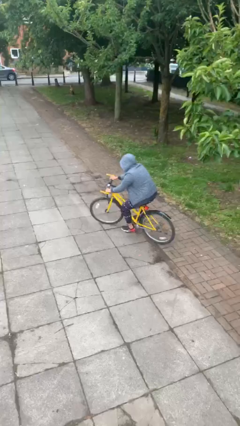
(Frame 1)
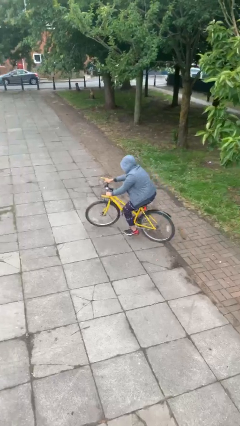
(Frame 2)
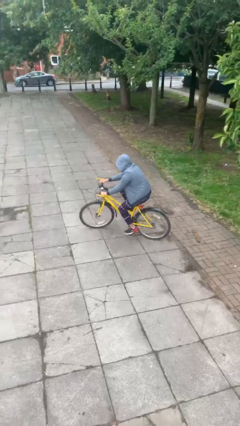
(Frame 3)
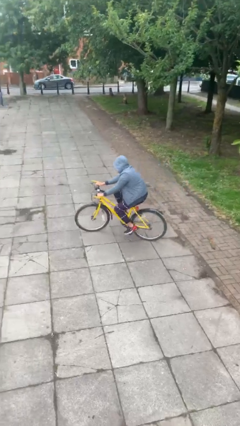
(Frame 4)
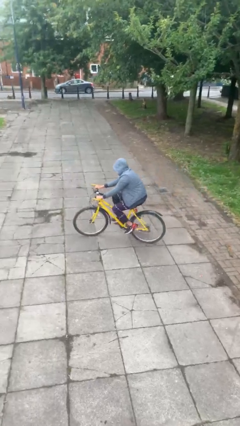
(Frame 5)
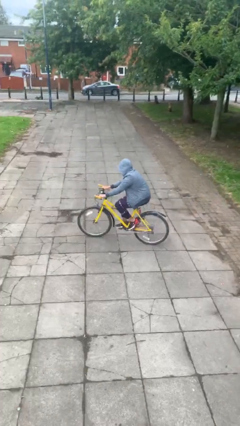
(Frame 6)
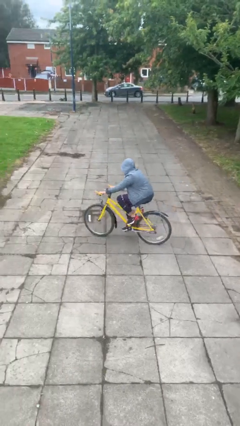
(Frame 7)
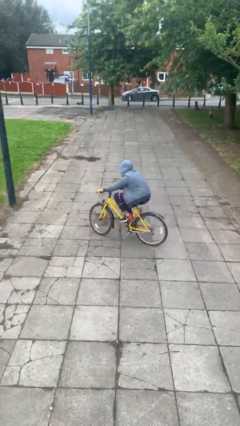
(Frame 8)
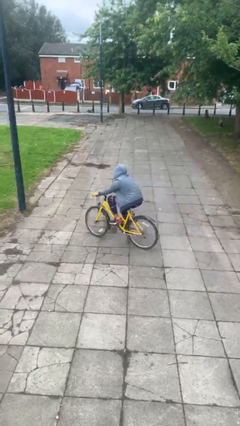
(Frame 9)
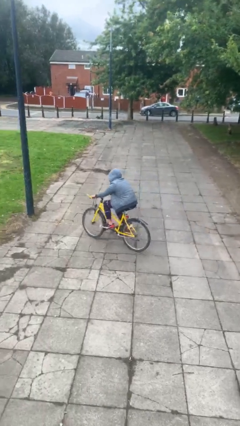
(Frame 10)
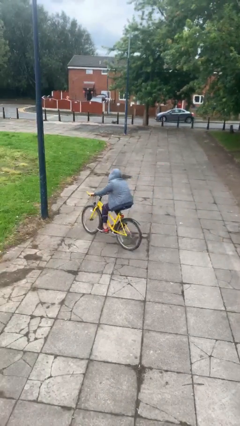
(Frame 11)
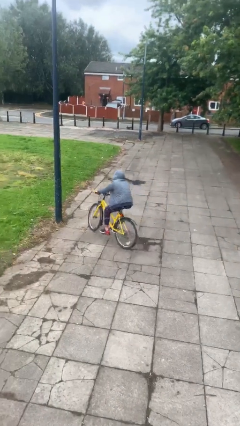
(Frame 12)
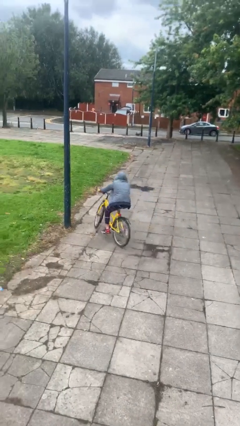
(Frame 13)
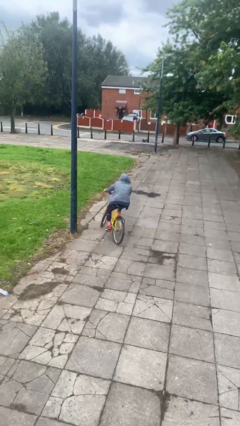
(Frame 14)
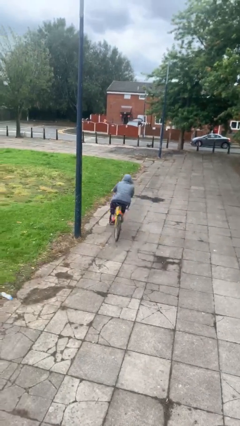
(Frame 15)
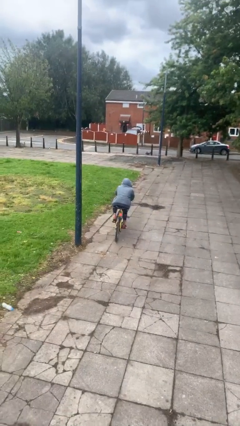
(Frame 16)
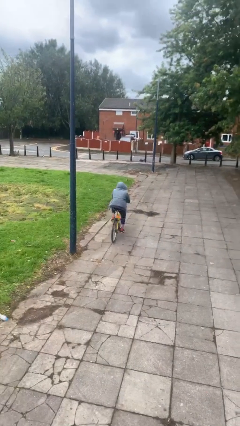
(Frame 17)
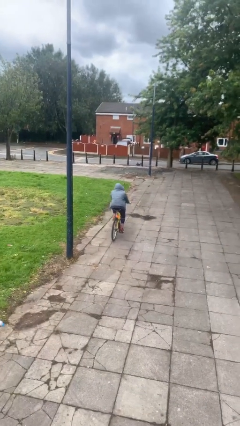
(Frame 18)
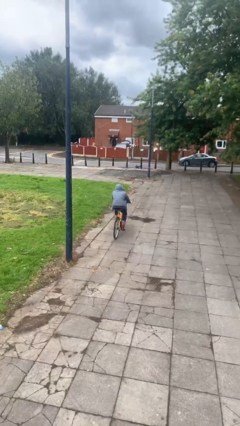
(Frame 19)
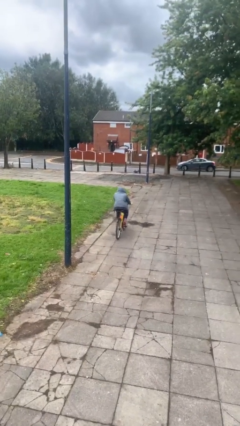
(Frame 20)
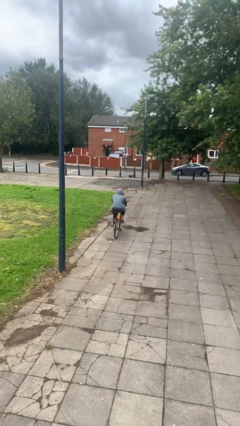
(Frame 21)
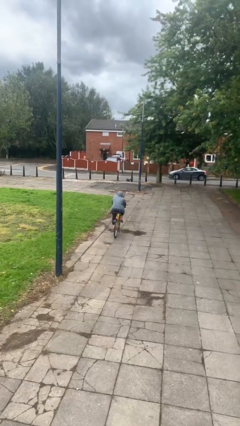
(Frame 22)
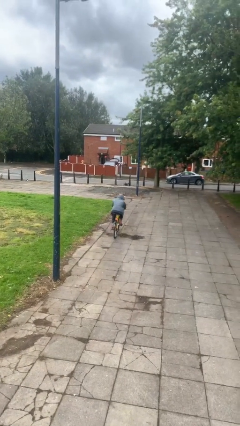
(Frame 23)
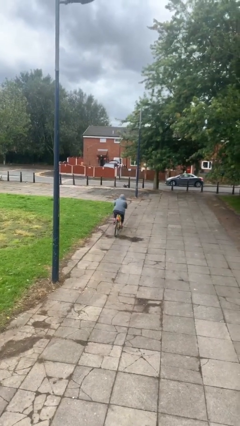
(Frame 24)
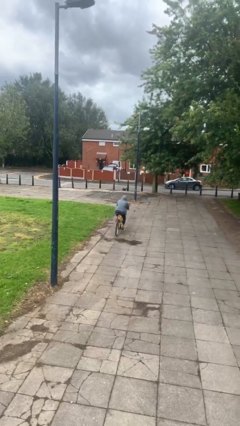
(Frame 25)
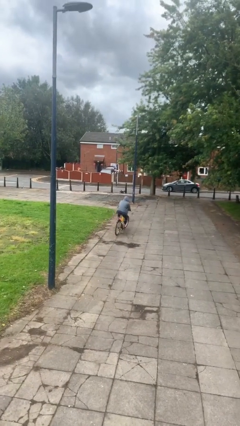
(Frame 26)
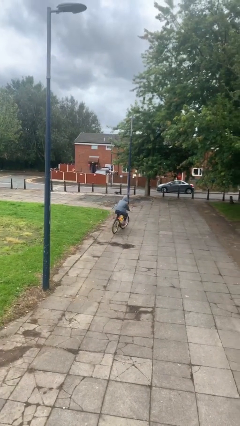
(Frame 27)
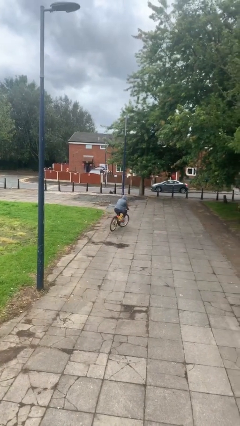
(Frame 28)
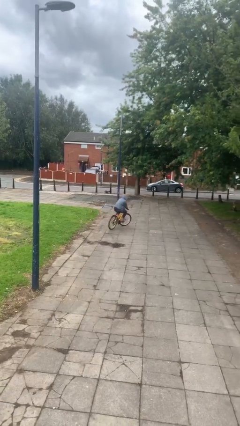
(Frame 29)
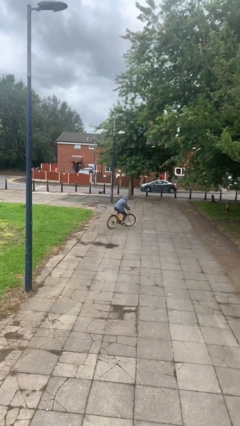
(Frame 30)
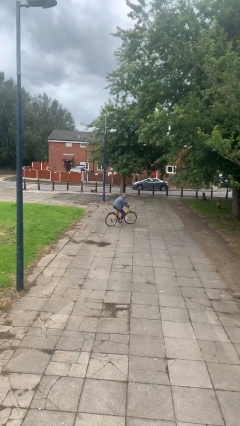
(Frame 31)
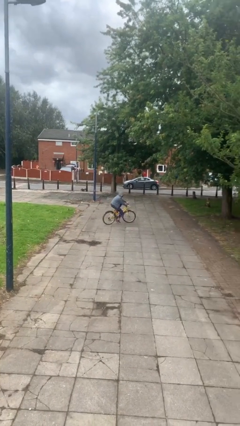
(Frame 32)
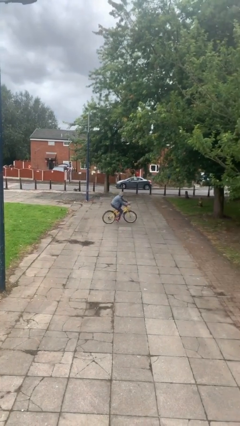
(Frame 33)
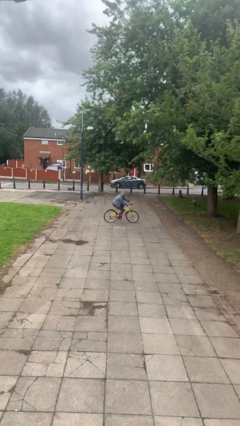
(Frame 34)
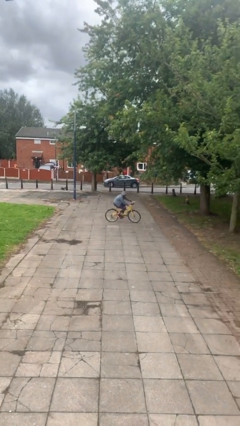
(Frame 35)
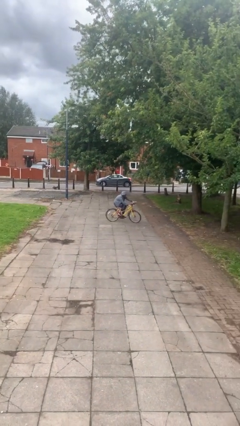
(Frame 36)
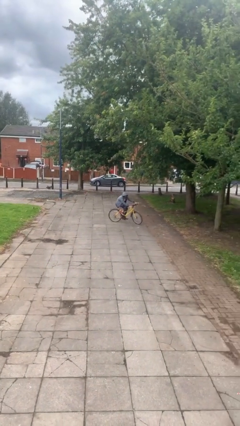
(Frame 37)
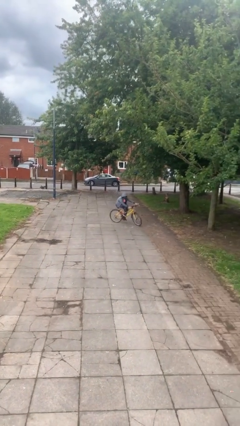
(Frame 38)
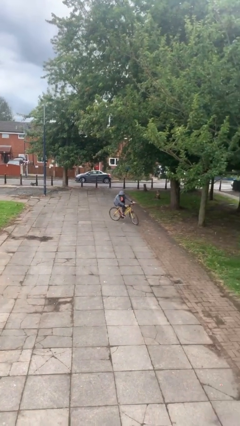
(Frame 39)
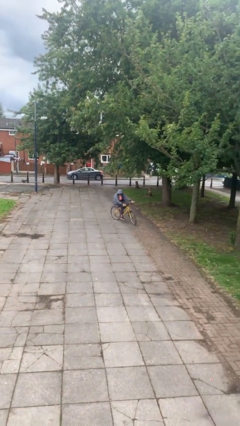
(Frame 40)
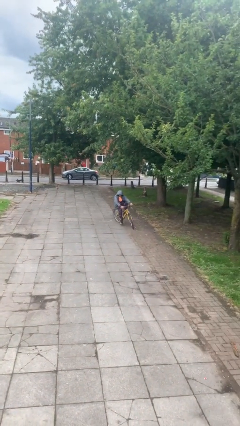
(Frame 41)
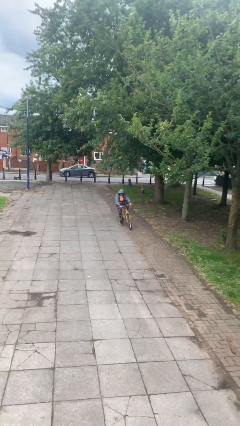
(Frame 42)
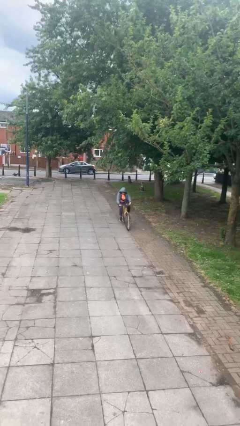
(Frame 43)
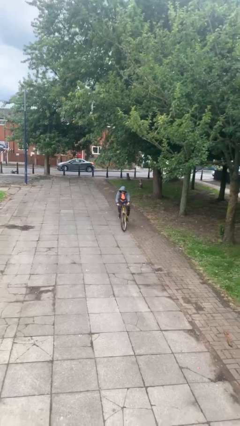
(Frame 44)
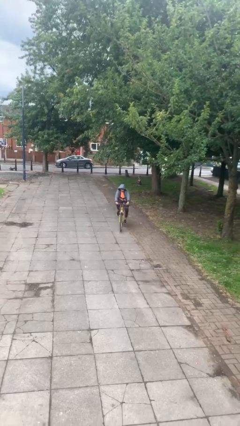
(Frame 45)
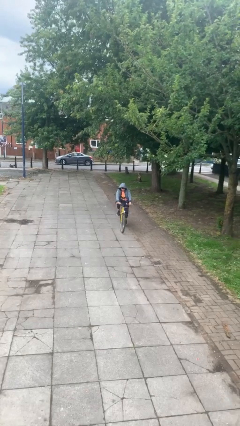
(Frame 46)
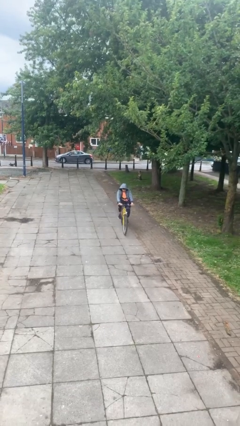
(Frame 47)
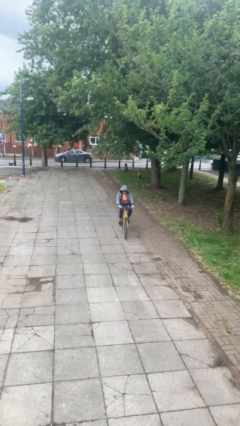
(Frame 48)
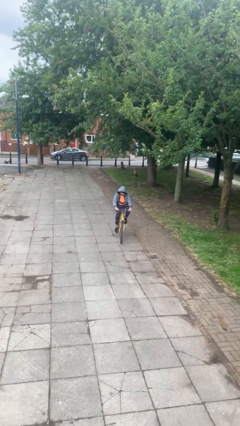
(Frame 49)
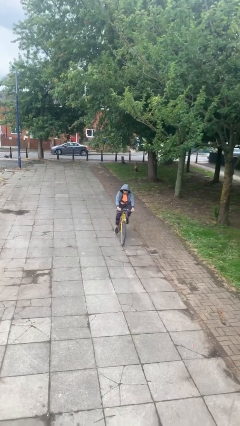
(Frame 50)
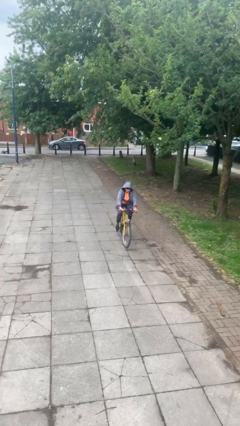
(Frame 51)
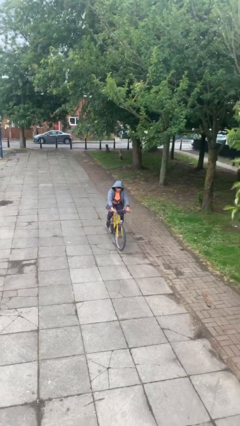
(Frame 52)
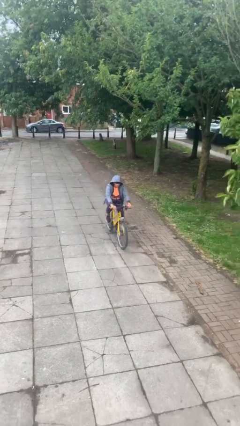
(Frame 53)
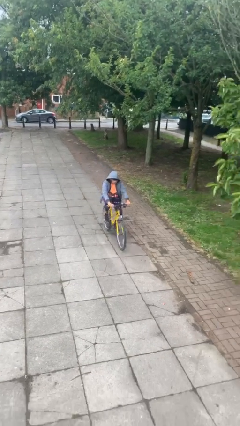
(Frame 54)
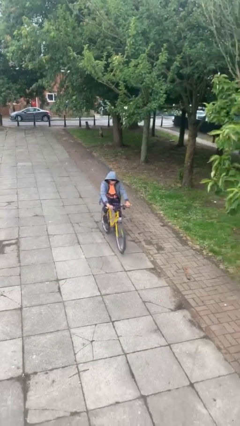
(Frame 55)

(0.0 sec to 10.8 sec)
person rides bicycle

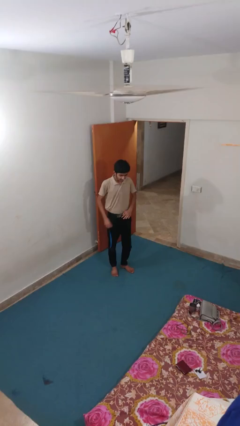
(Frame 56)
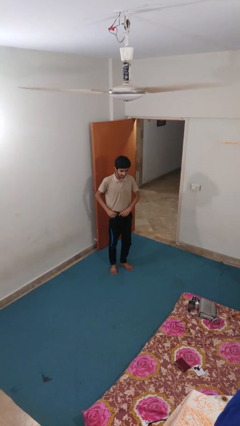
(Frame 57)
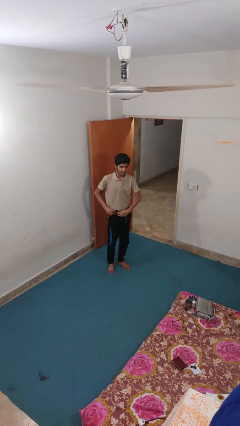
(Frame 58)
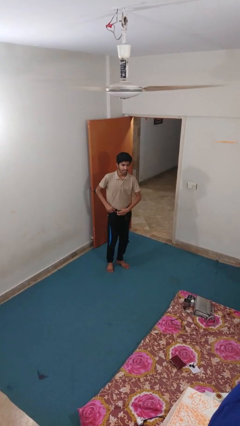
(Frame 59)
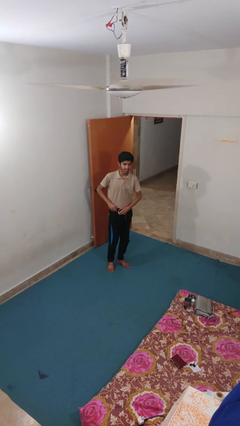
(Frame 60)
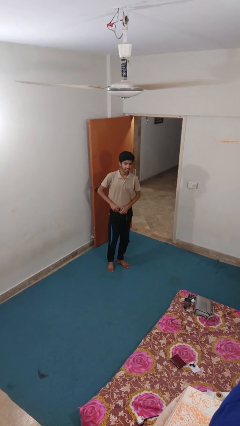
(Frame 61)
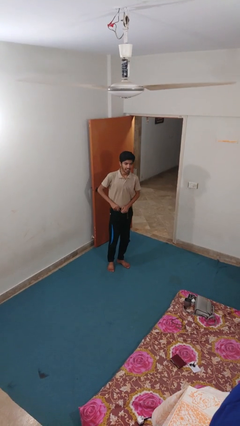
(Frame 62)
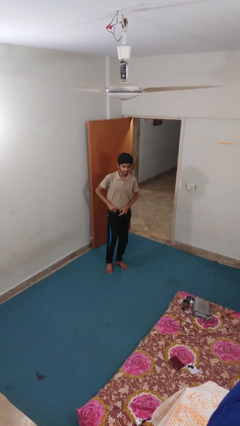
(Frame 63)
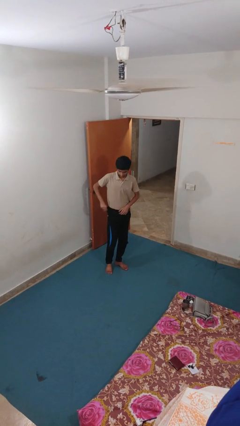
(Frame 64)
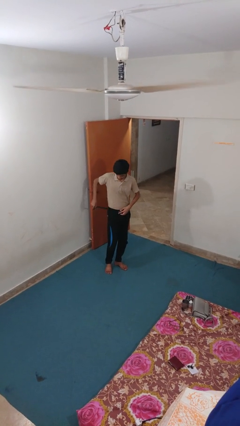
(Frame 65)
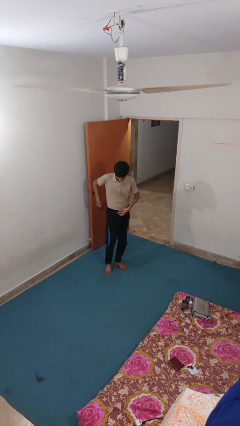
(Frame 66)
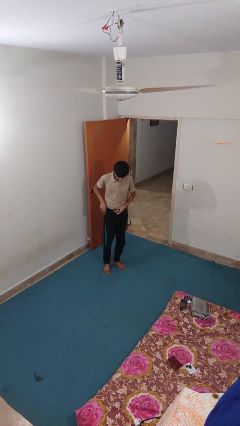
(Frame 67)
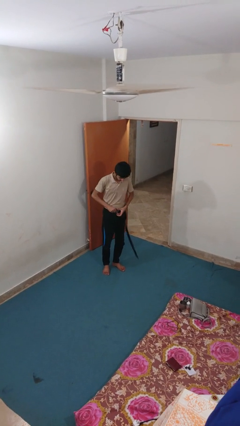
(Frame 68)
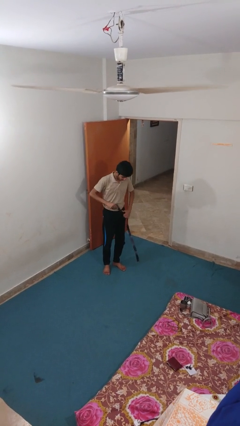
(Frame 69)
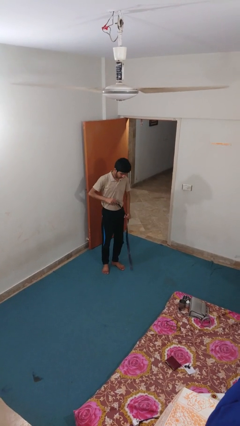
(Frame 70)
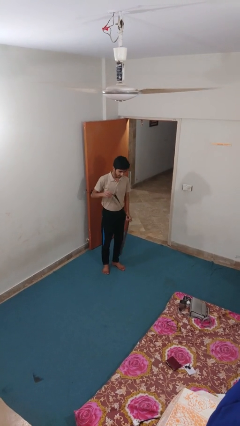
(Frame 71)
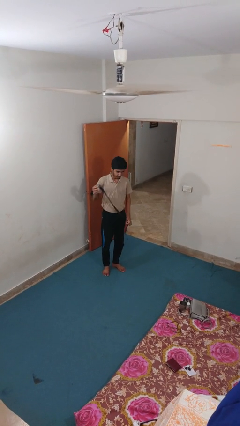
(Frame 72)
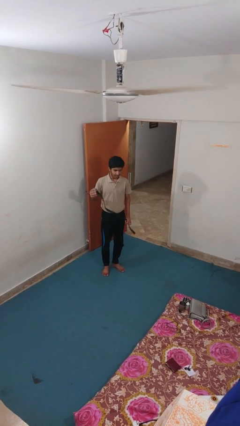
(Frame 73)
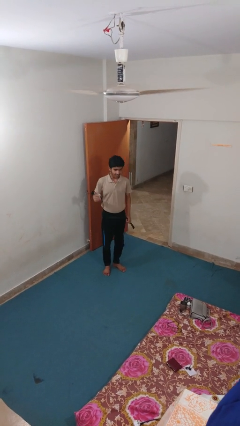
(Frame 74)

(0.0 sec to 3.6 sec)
person takes off belt

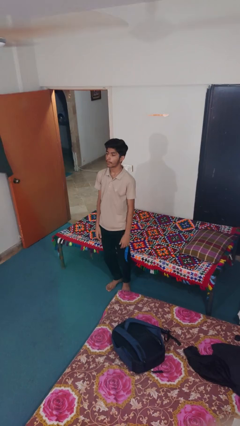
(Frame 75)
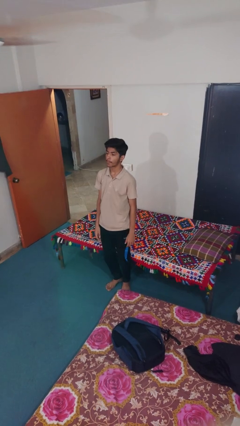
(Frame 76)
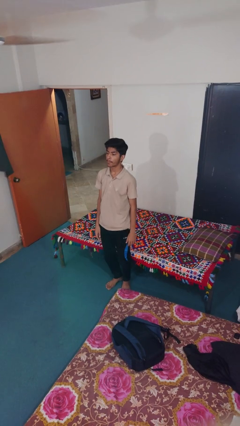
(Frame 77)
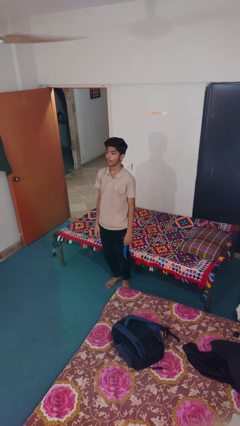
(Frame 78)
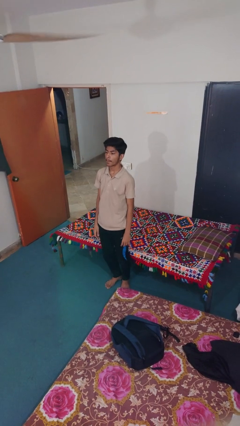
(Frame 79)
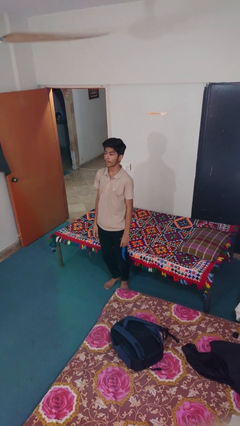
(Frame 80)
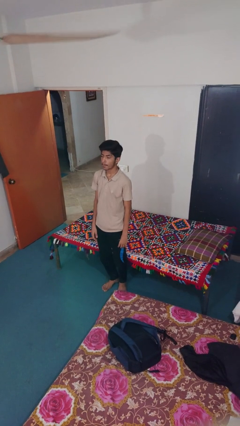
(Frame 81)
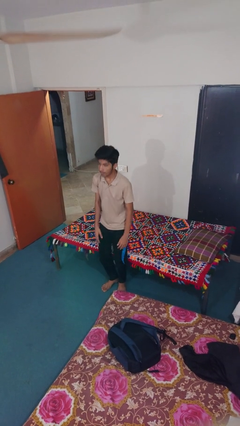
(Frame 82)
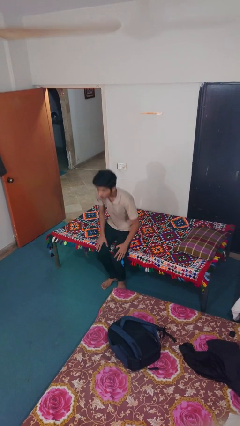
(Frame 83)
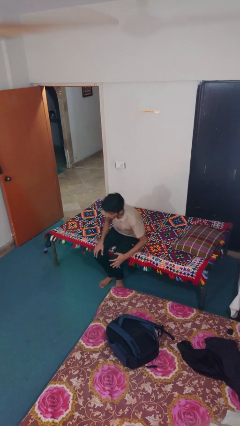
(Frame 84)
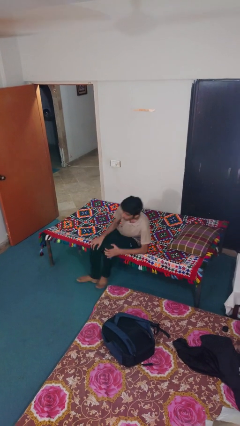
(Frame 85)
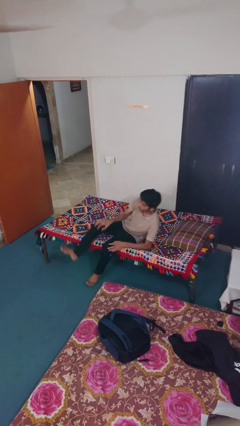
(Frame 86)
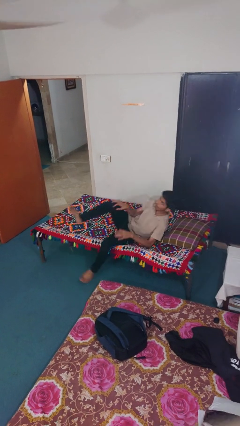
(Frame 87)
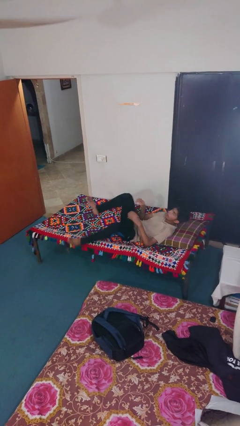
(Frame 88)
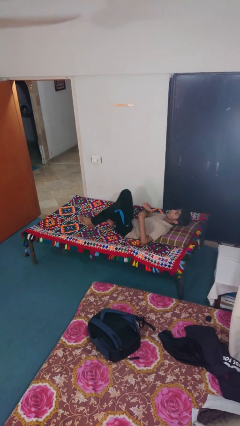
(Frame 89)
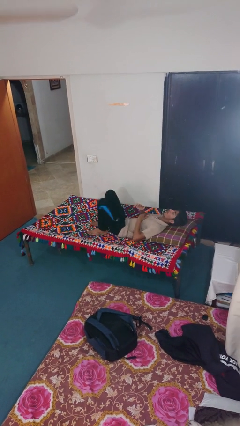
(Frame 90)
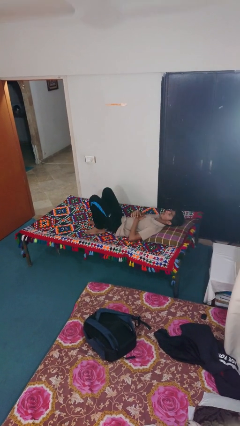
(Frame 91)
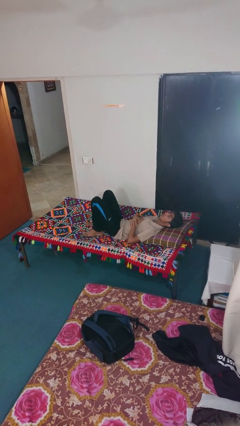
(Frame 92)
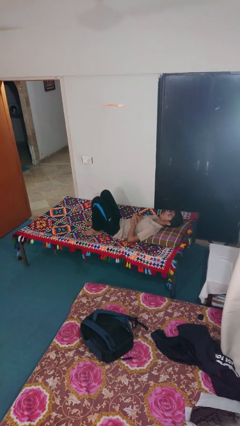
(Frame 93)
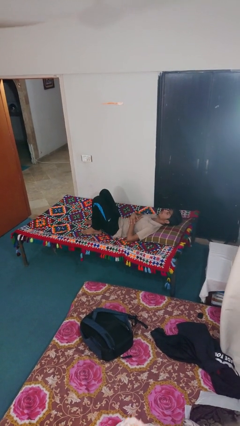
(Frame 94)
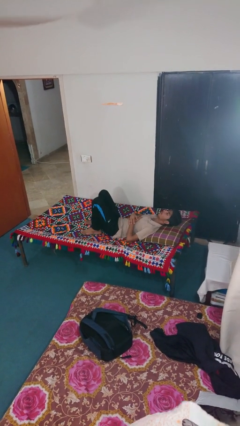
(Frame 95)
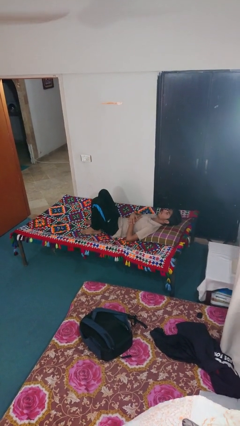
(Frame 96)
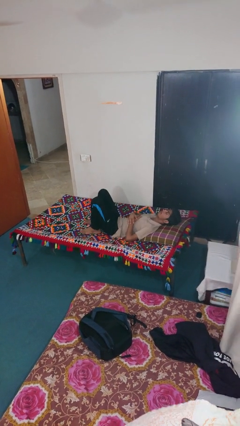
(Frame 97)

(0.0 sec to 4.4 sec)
person lies down on bed
